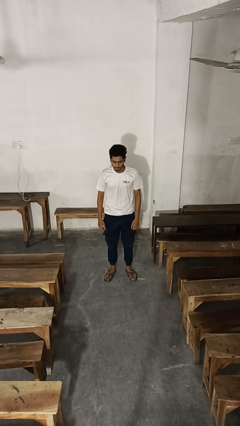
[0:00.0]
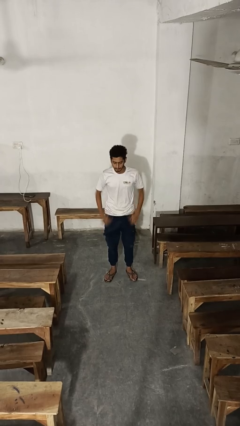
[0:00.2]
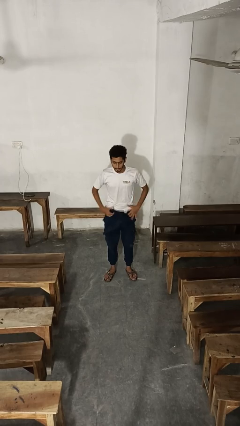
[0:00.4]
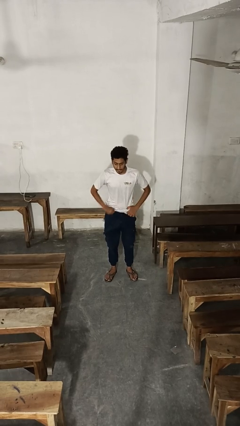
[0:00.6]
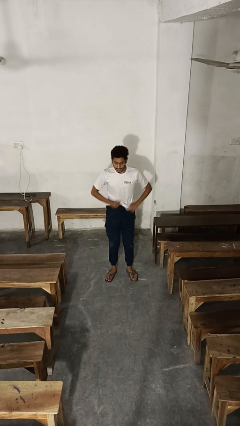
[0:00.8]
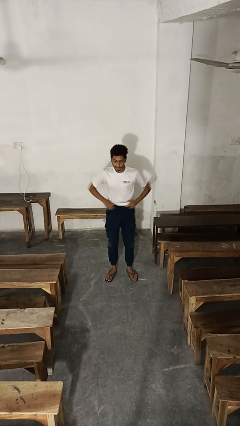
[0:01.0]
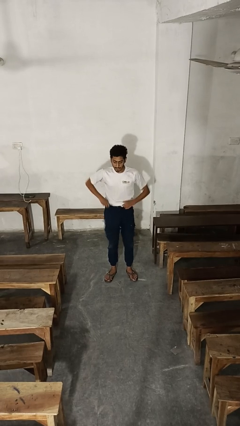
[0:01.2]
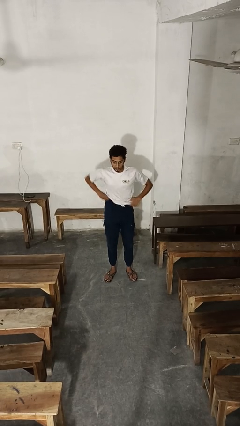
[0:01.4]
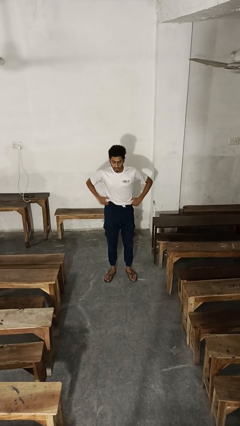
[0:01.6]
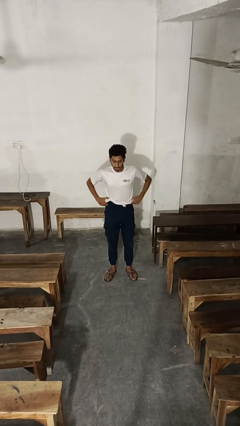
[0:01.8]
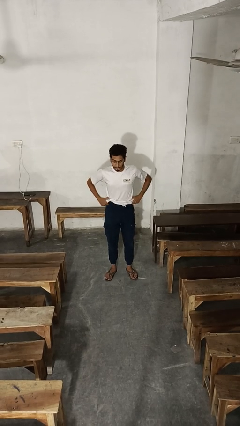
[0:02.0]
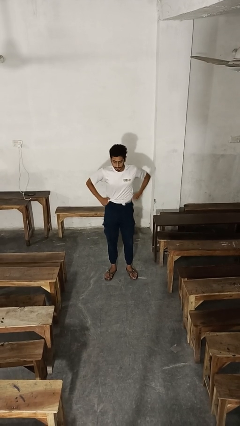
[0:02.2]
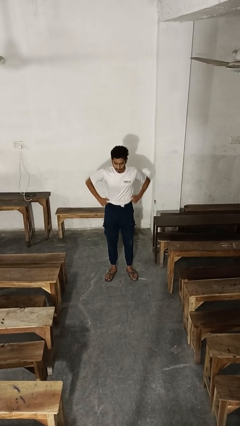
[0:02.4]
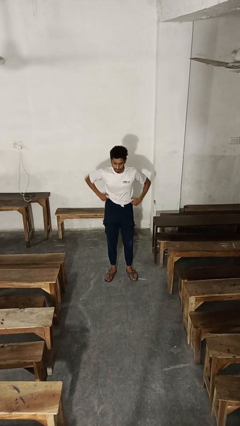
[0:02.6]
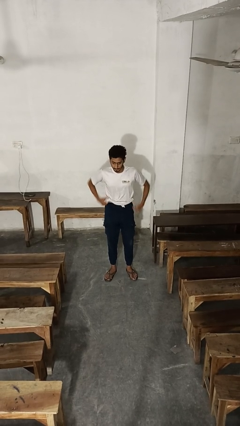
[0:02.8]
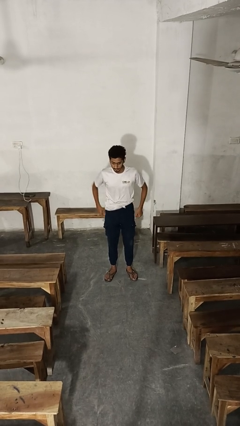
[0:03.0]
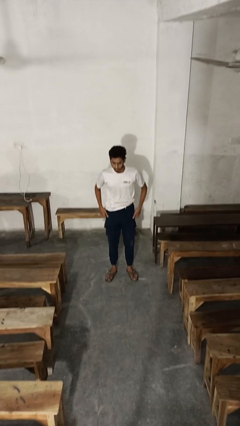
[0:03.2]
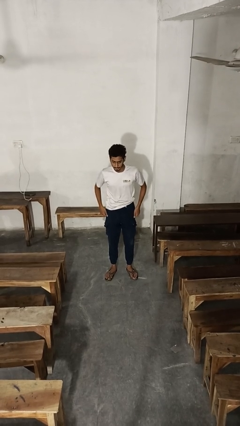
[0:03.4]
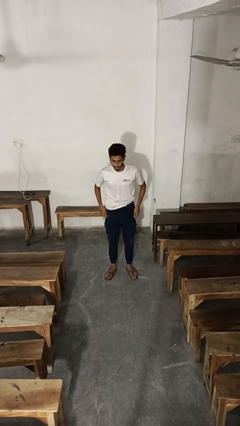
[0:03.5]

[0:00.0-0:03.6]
person hikes up pants

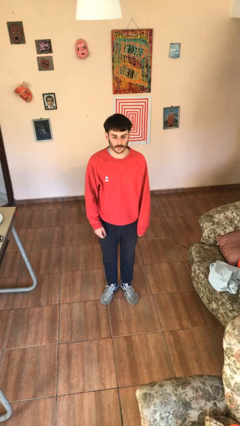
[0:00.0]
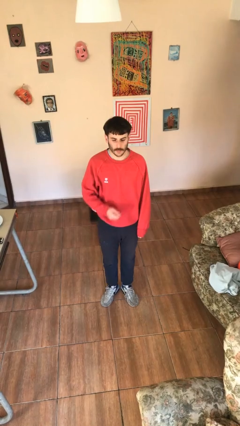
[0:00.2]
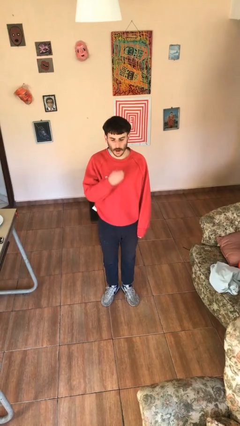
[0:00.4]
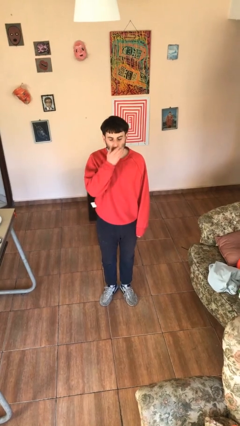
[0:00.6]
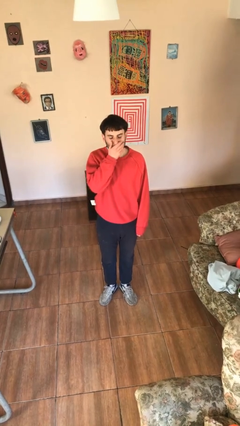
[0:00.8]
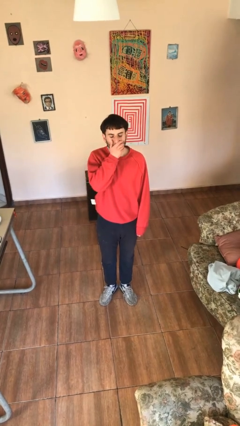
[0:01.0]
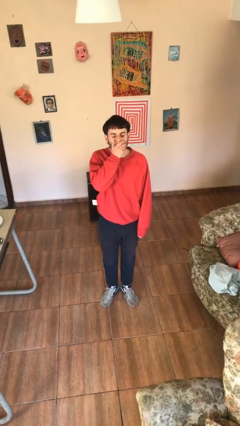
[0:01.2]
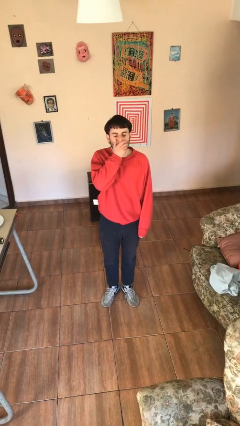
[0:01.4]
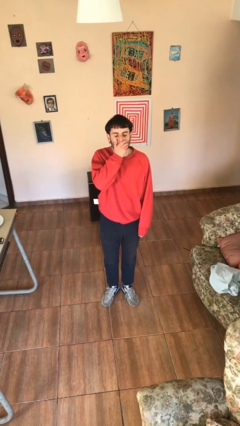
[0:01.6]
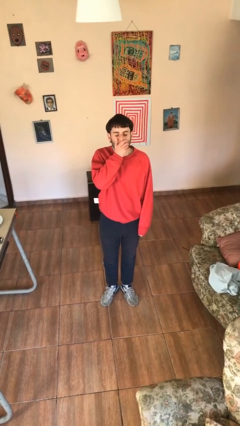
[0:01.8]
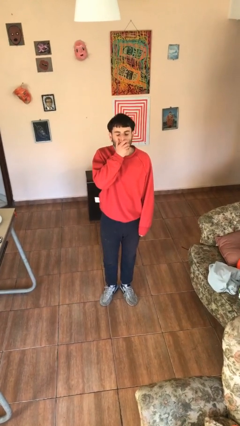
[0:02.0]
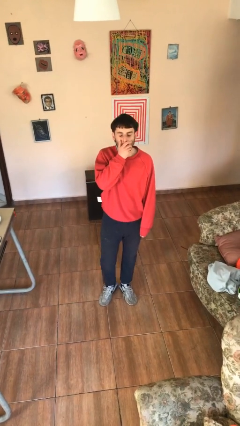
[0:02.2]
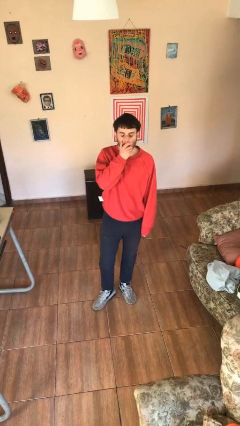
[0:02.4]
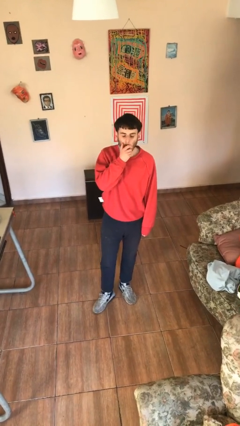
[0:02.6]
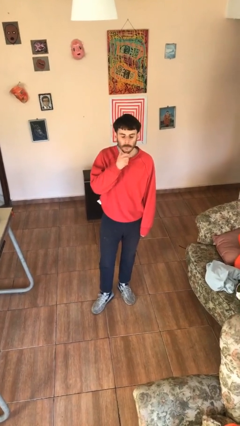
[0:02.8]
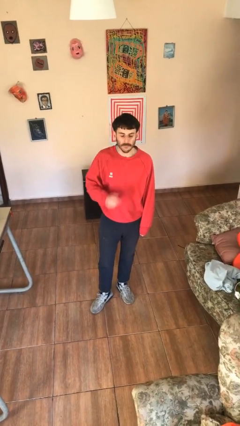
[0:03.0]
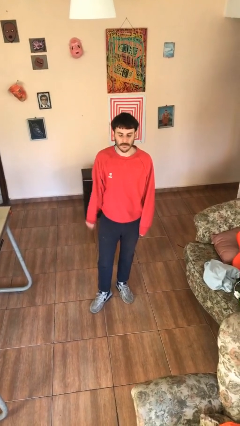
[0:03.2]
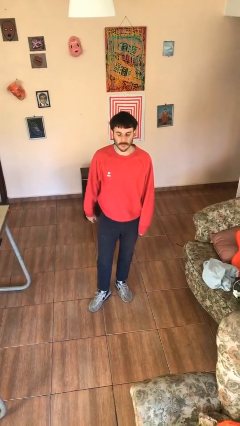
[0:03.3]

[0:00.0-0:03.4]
person yawns

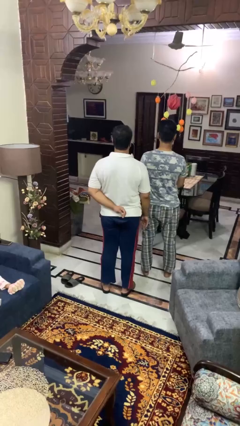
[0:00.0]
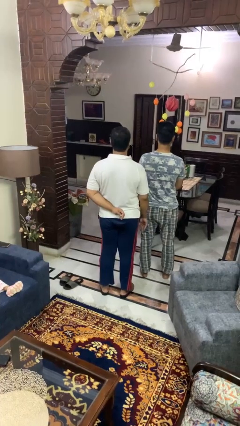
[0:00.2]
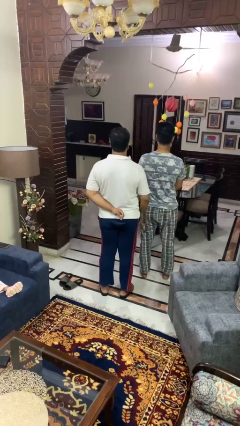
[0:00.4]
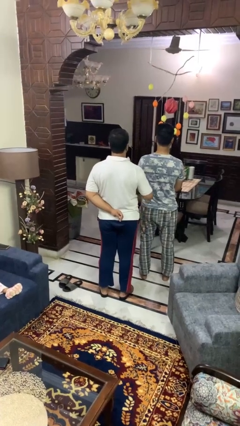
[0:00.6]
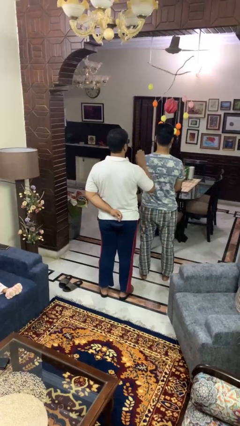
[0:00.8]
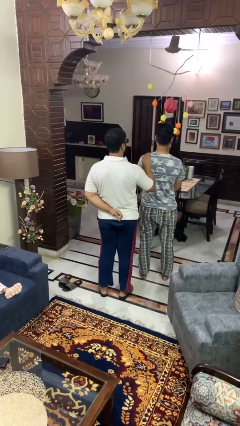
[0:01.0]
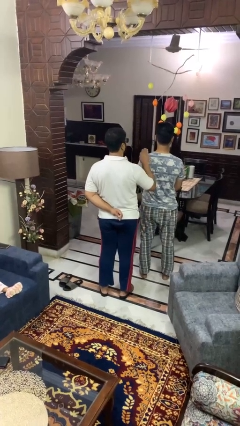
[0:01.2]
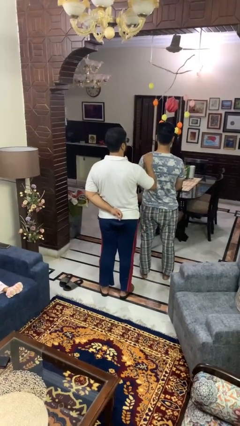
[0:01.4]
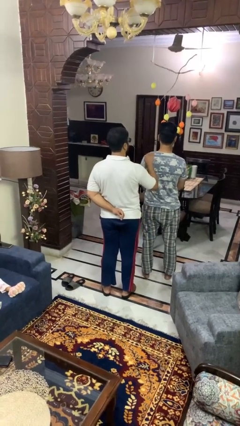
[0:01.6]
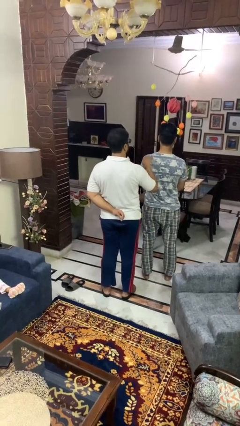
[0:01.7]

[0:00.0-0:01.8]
person pounds shoulders of person

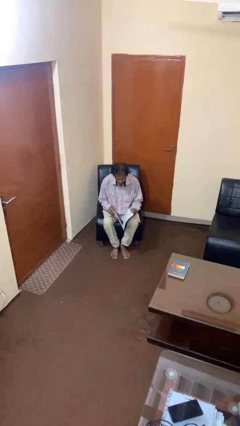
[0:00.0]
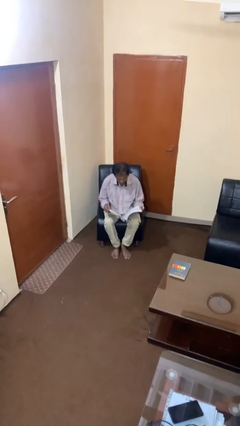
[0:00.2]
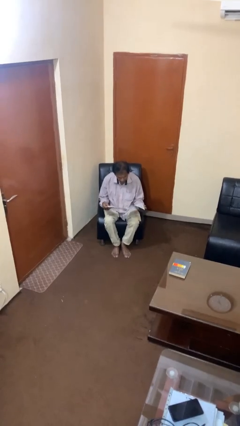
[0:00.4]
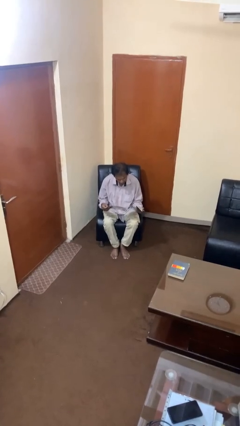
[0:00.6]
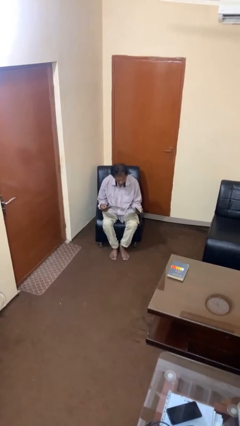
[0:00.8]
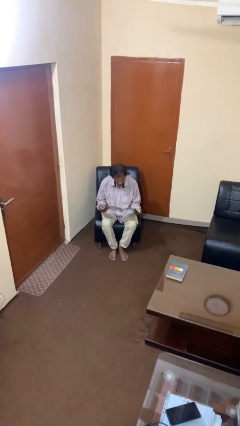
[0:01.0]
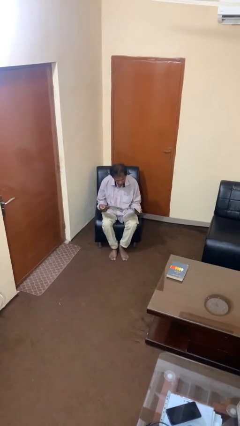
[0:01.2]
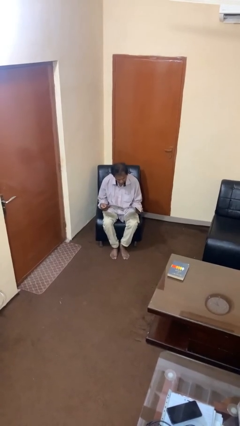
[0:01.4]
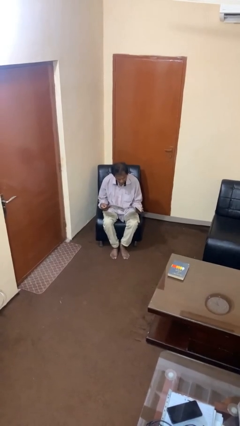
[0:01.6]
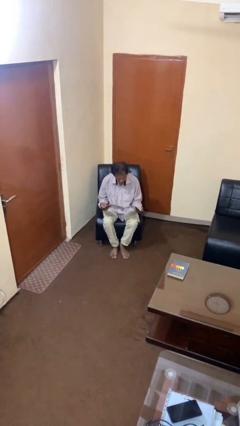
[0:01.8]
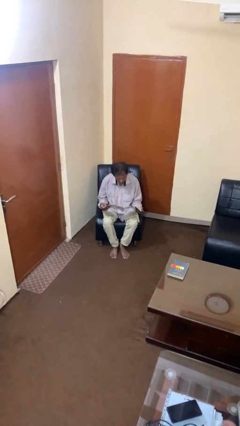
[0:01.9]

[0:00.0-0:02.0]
person reads magazine

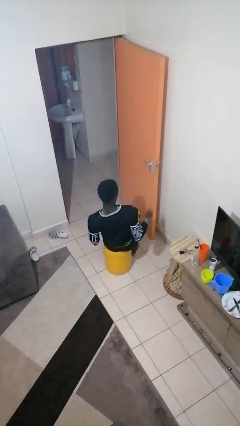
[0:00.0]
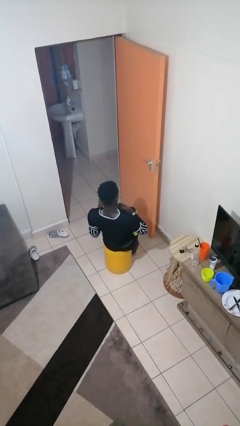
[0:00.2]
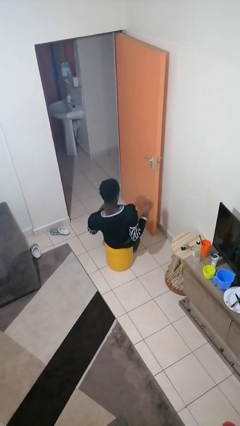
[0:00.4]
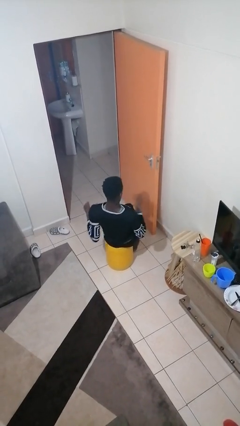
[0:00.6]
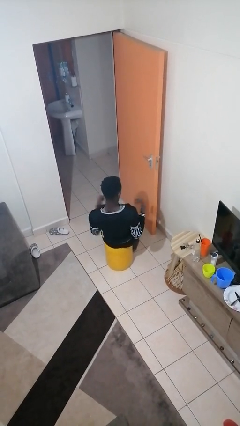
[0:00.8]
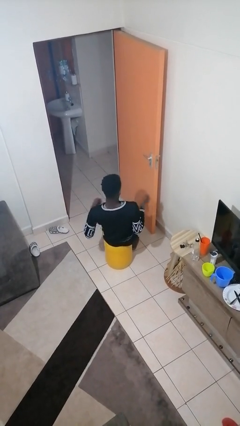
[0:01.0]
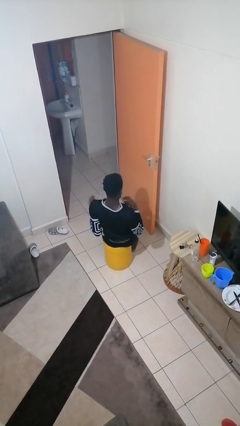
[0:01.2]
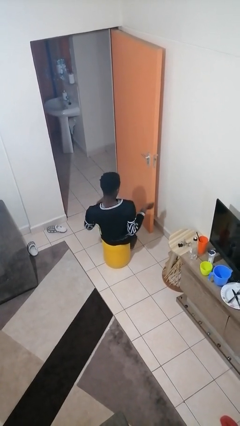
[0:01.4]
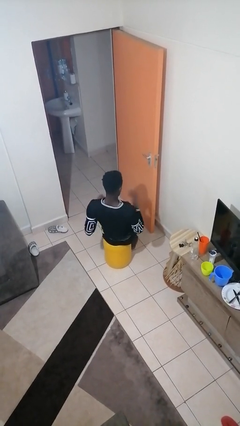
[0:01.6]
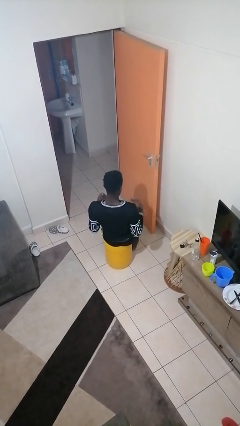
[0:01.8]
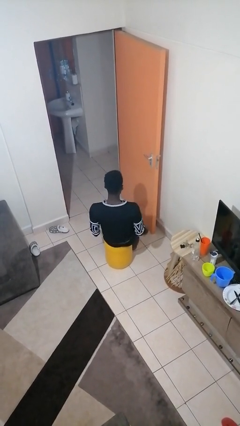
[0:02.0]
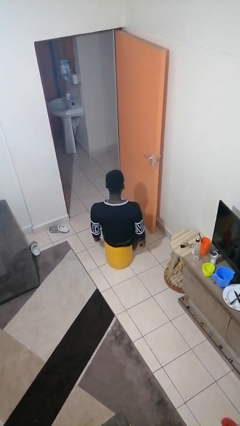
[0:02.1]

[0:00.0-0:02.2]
person drums on chest

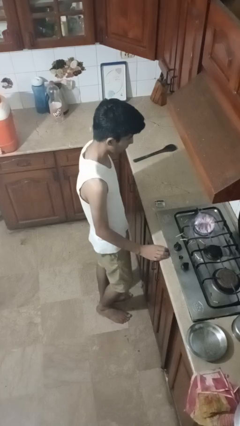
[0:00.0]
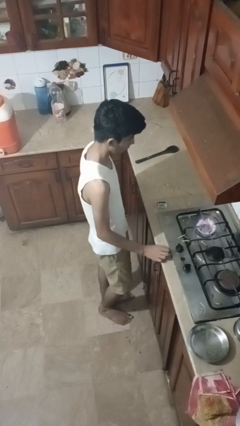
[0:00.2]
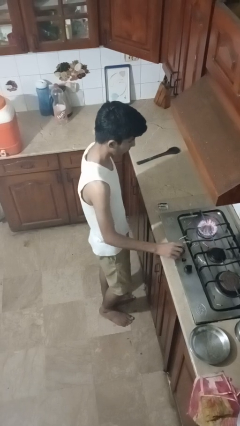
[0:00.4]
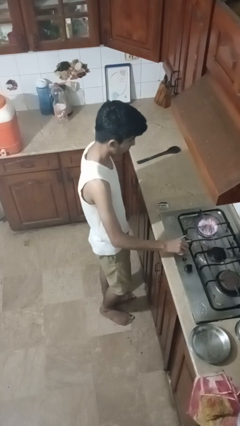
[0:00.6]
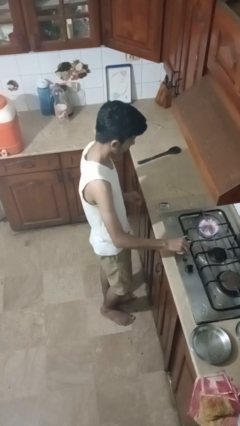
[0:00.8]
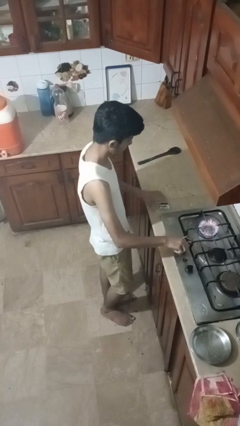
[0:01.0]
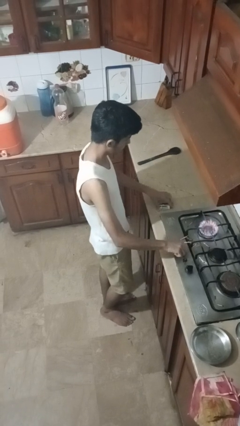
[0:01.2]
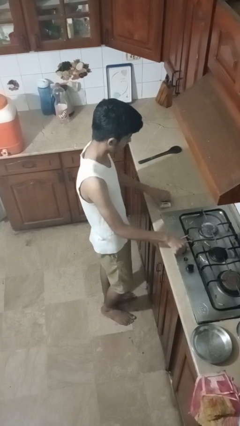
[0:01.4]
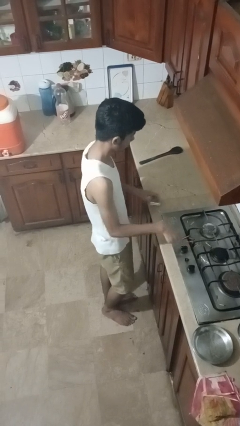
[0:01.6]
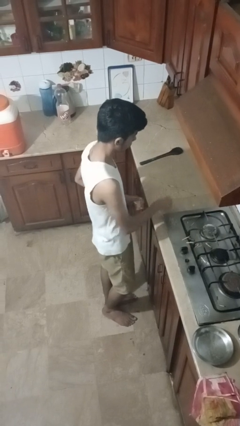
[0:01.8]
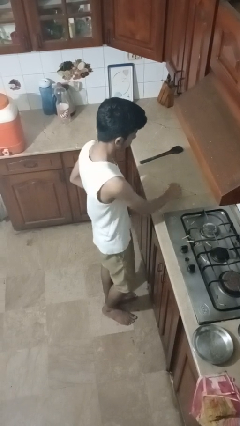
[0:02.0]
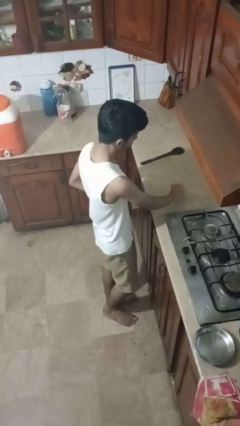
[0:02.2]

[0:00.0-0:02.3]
person turns off stovetop

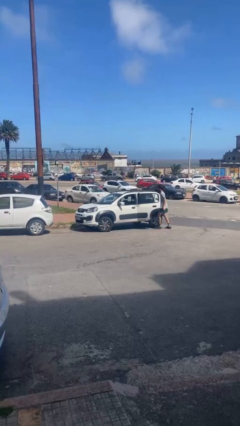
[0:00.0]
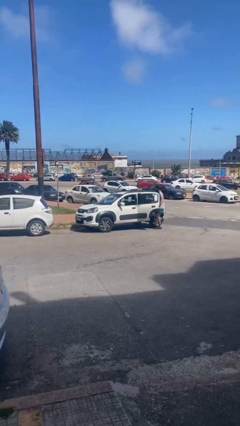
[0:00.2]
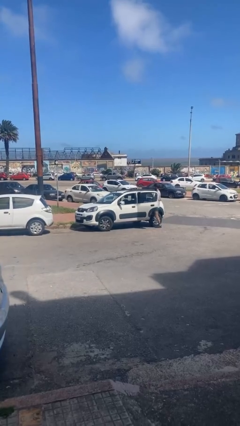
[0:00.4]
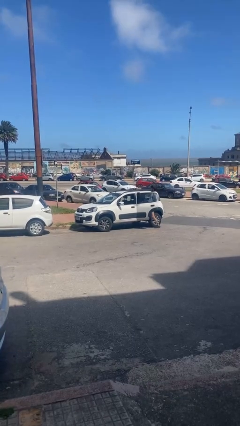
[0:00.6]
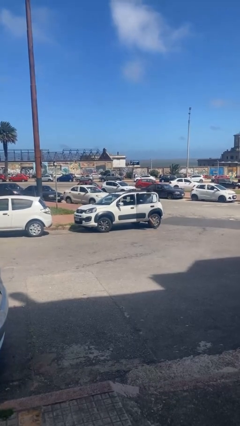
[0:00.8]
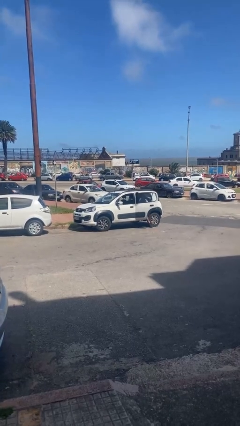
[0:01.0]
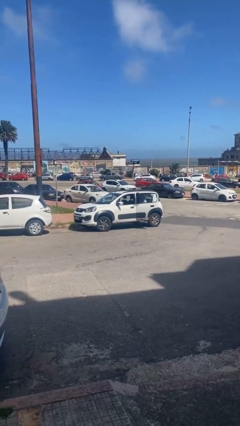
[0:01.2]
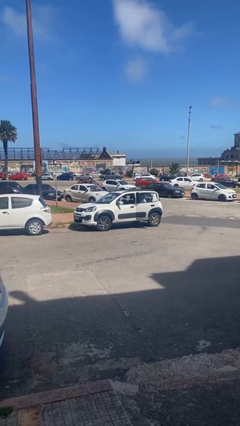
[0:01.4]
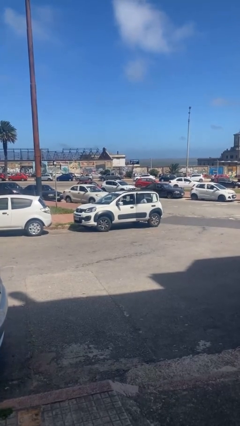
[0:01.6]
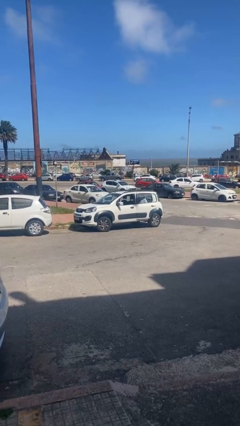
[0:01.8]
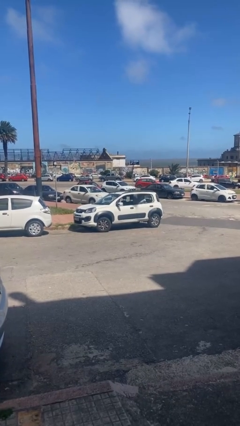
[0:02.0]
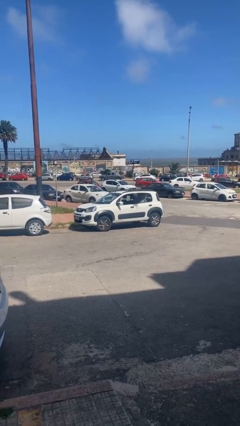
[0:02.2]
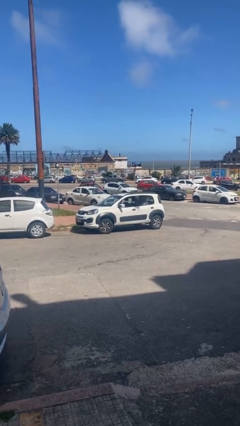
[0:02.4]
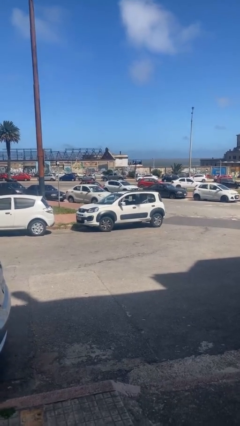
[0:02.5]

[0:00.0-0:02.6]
car picks up person
